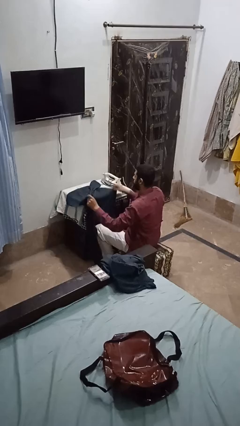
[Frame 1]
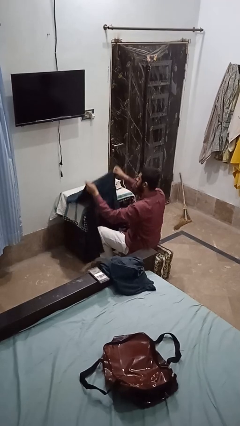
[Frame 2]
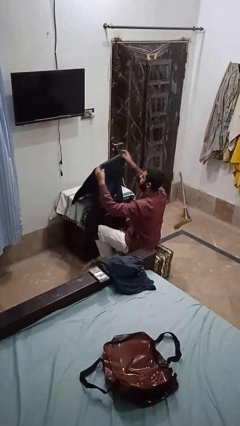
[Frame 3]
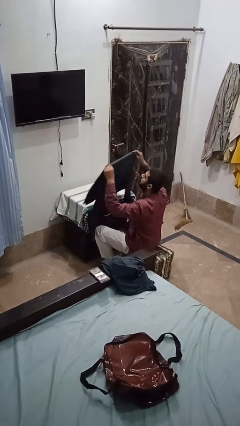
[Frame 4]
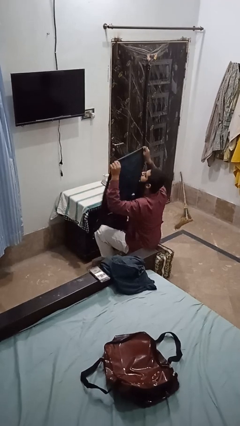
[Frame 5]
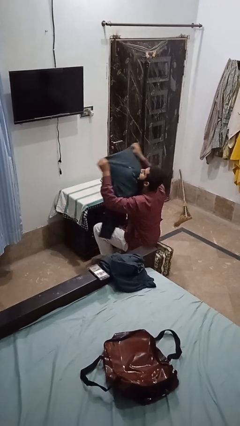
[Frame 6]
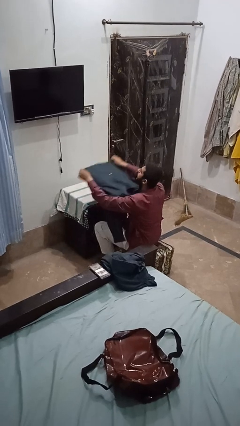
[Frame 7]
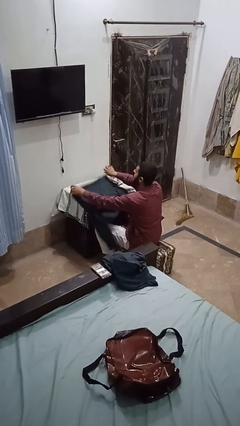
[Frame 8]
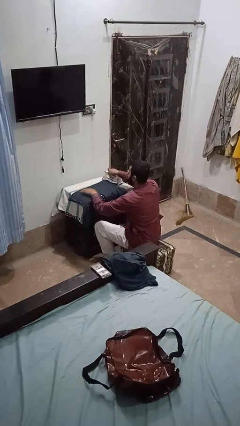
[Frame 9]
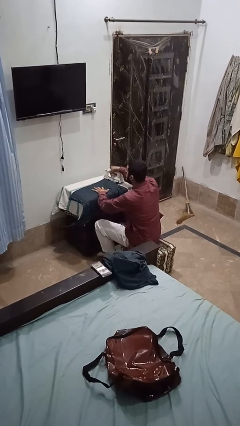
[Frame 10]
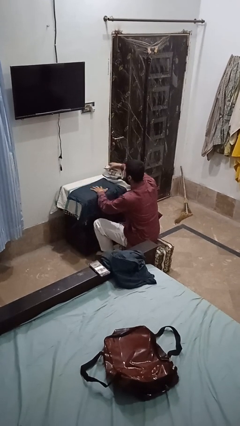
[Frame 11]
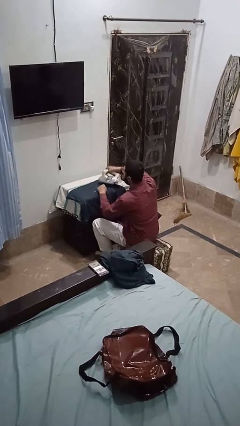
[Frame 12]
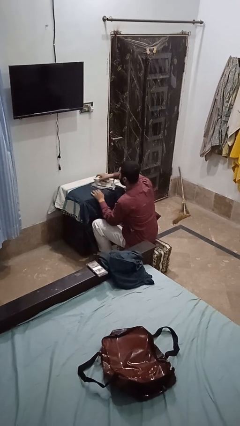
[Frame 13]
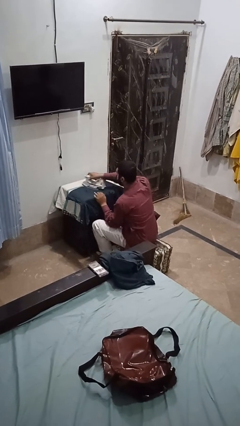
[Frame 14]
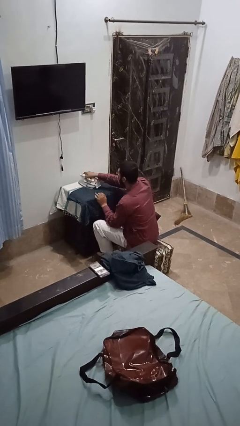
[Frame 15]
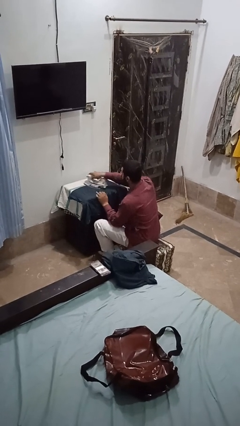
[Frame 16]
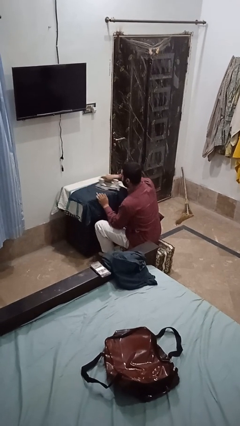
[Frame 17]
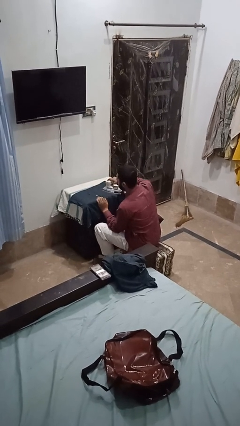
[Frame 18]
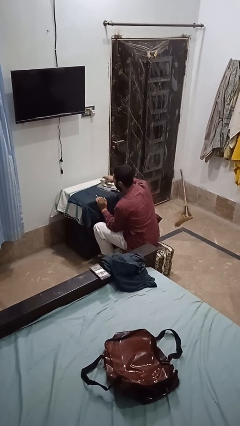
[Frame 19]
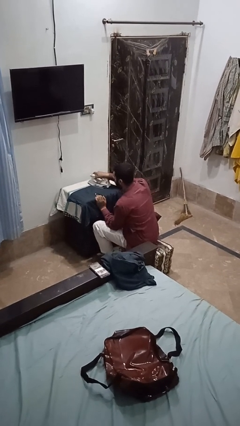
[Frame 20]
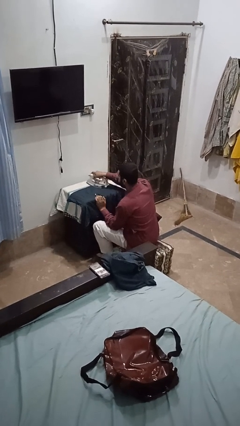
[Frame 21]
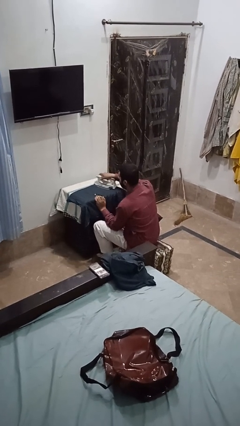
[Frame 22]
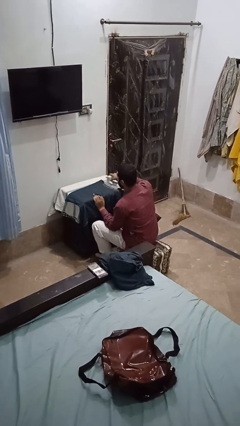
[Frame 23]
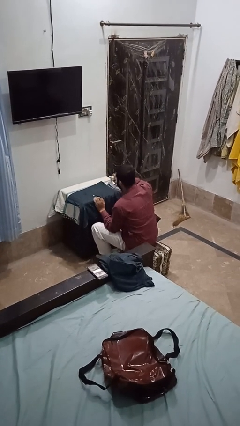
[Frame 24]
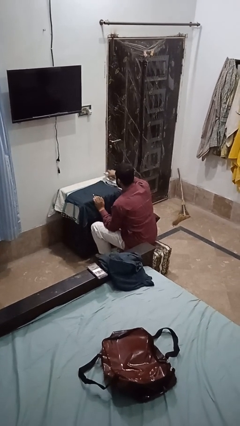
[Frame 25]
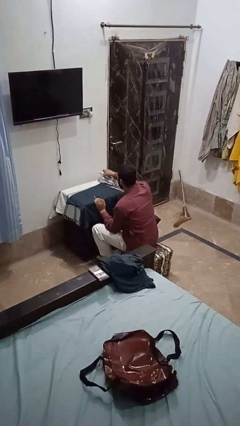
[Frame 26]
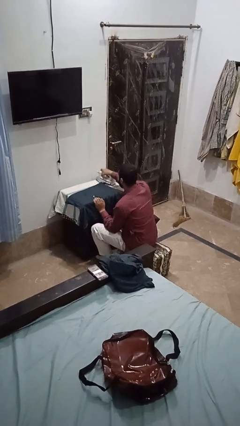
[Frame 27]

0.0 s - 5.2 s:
person irons clothes

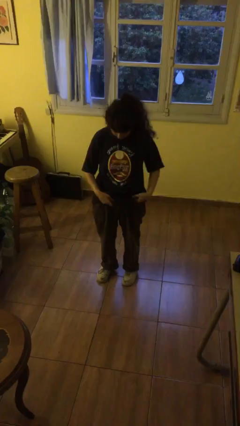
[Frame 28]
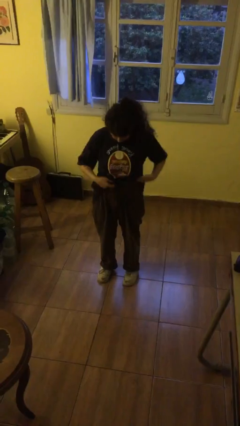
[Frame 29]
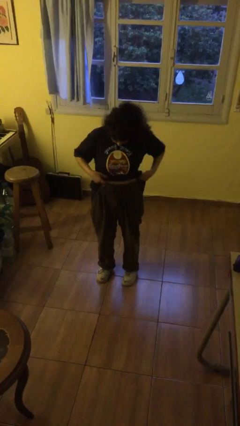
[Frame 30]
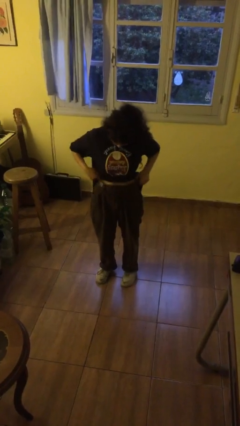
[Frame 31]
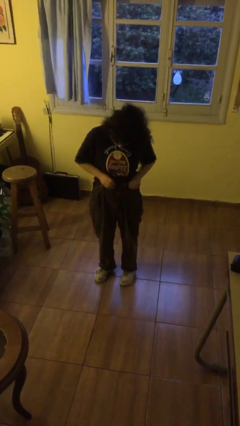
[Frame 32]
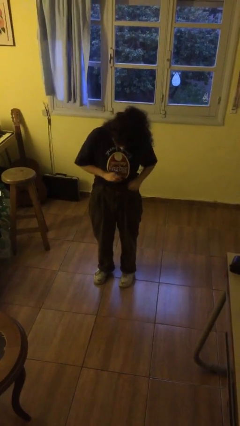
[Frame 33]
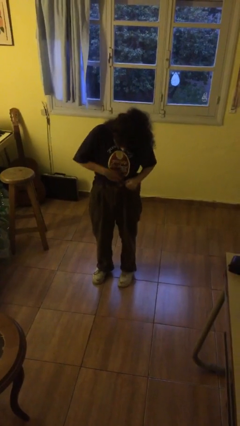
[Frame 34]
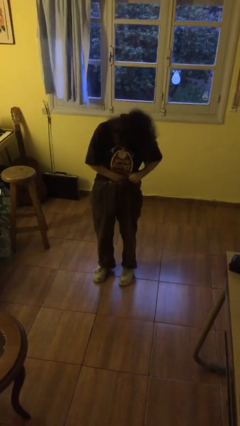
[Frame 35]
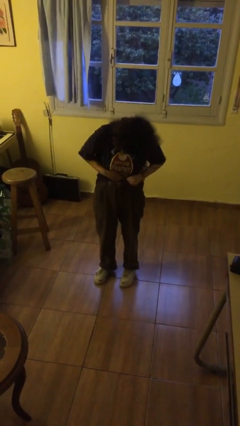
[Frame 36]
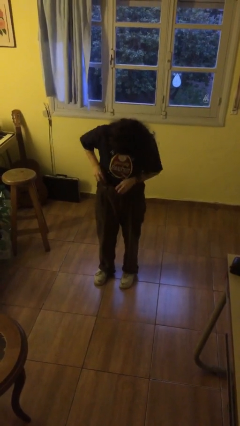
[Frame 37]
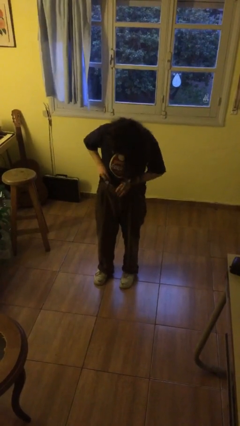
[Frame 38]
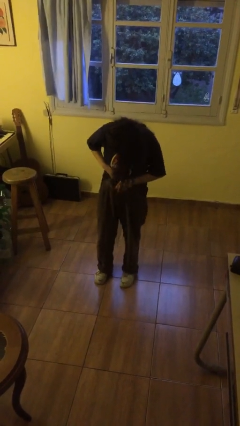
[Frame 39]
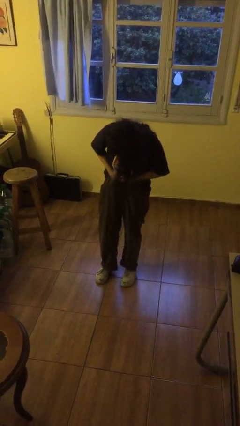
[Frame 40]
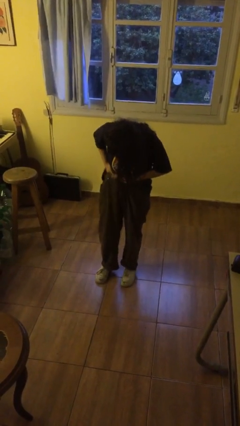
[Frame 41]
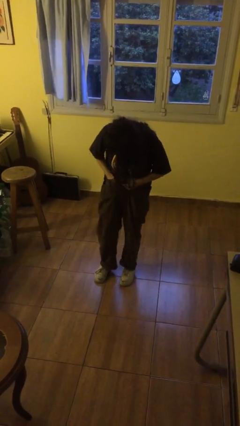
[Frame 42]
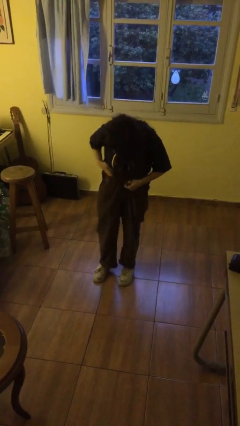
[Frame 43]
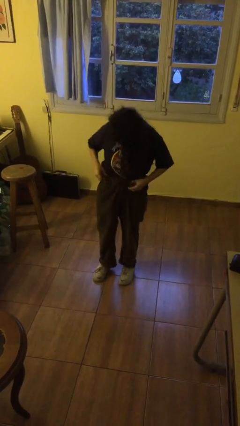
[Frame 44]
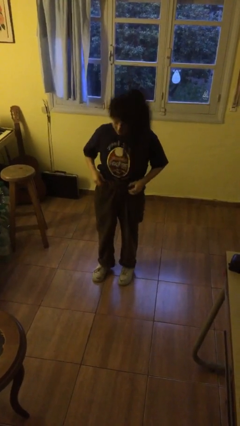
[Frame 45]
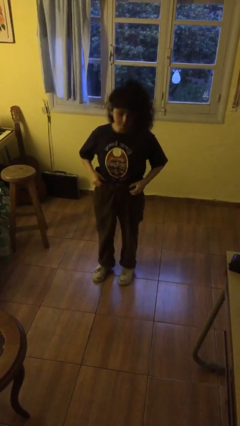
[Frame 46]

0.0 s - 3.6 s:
person tucks in shirt

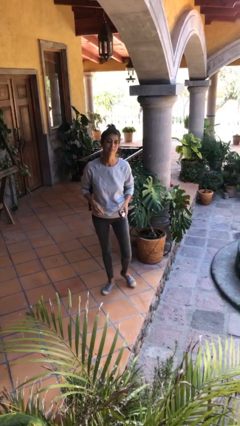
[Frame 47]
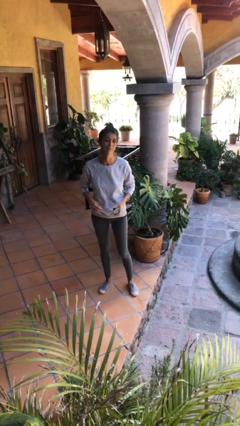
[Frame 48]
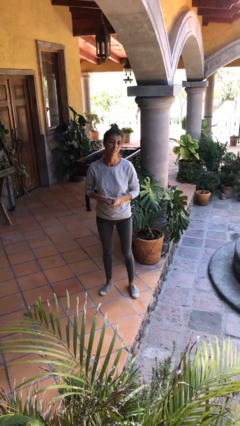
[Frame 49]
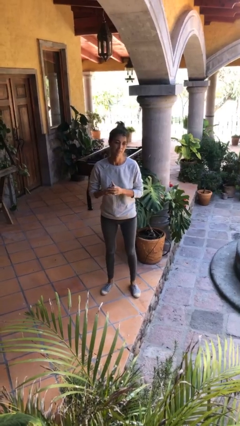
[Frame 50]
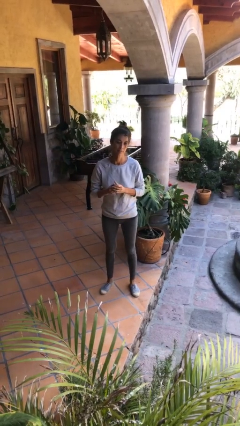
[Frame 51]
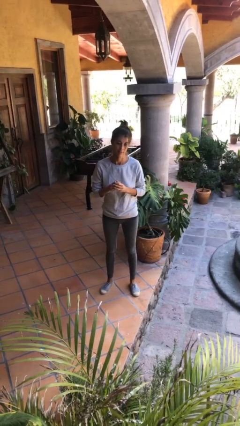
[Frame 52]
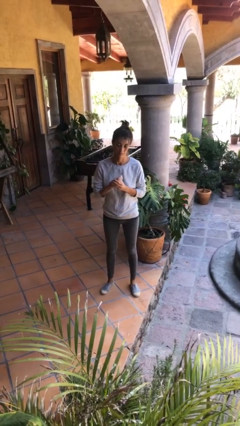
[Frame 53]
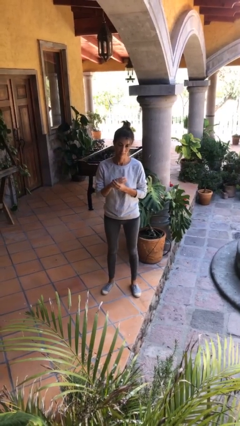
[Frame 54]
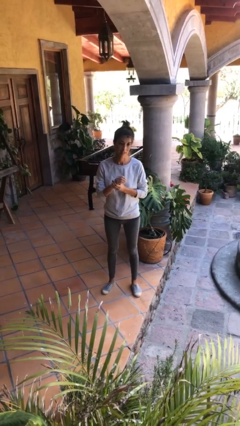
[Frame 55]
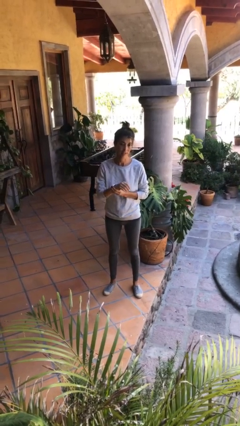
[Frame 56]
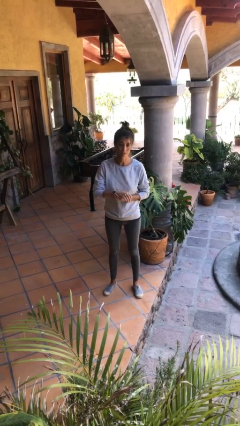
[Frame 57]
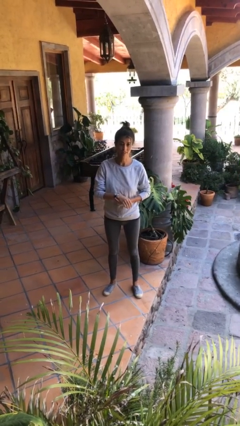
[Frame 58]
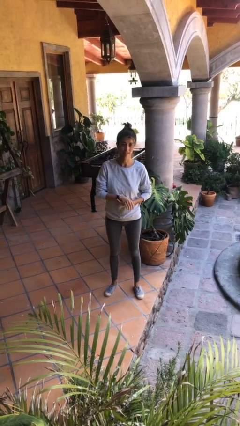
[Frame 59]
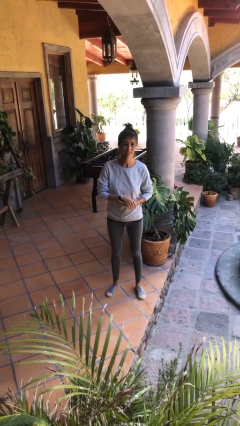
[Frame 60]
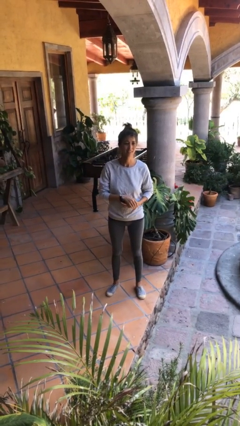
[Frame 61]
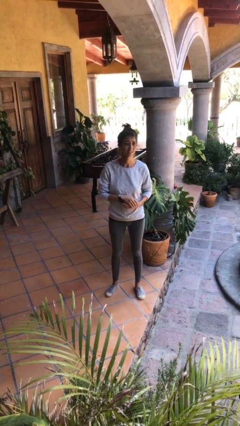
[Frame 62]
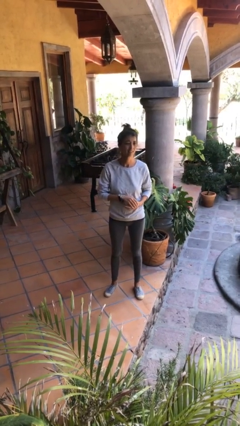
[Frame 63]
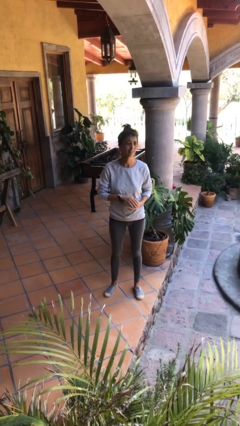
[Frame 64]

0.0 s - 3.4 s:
person puts on wristwatch

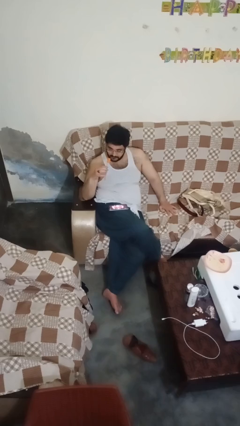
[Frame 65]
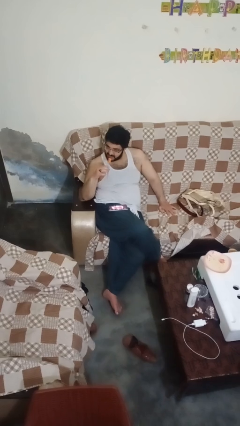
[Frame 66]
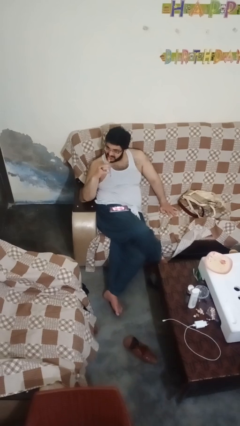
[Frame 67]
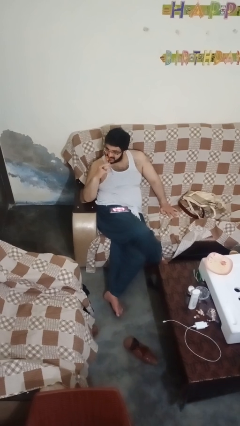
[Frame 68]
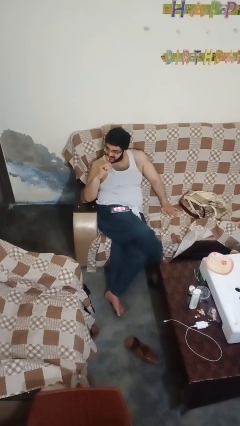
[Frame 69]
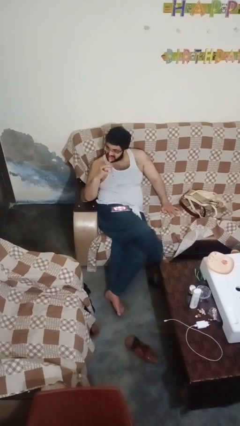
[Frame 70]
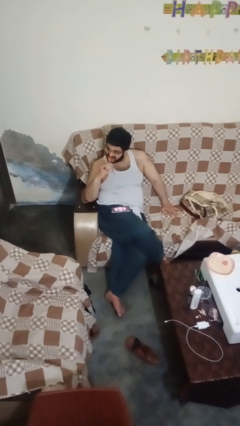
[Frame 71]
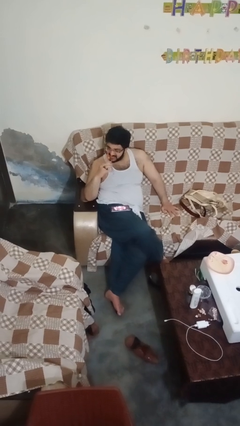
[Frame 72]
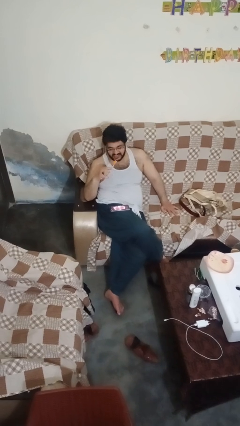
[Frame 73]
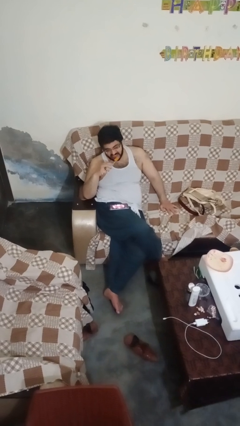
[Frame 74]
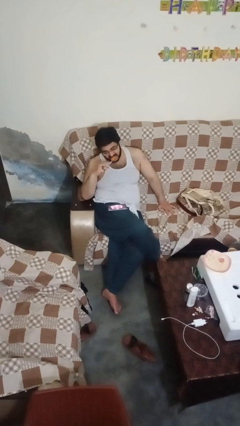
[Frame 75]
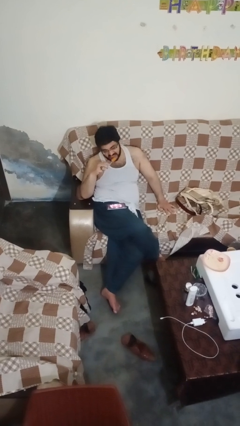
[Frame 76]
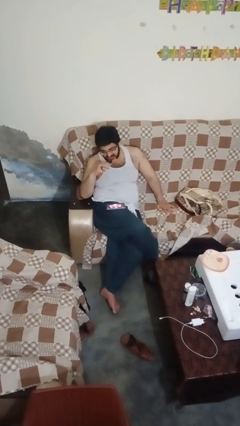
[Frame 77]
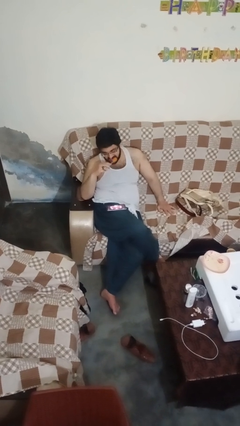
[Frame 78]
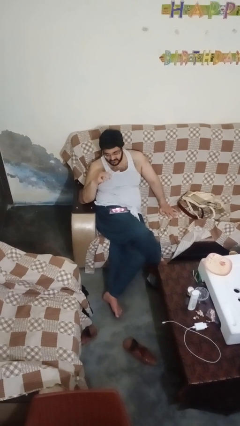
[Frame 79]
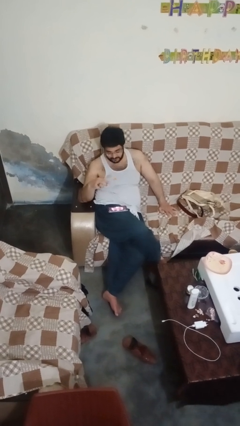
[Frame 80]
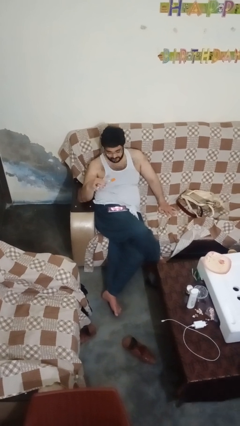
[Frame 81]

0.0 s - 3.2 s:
person brushes teeth

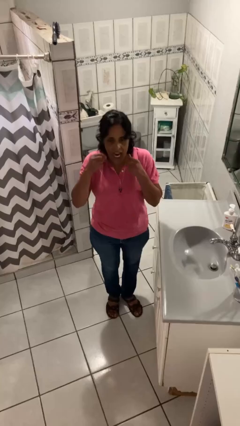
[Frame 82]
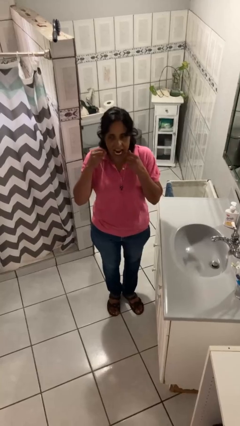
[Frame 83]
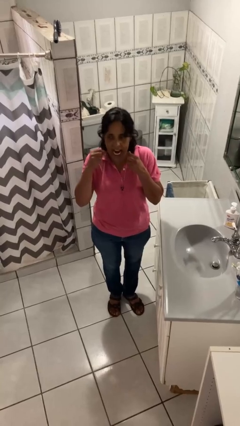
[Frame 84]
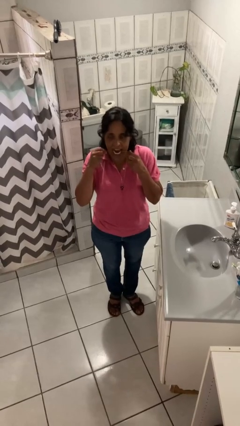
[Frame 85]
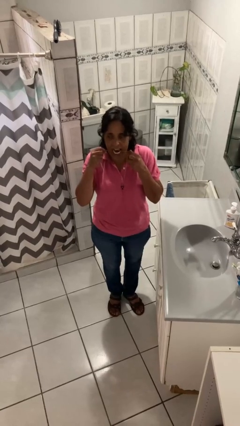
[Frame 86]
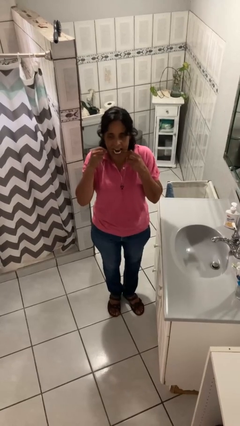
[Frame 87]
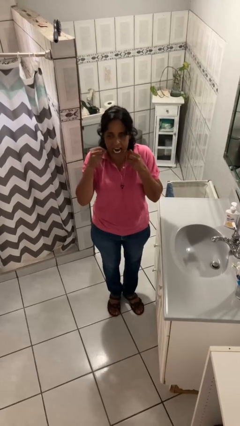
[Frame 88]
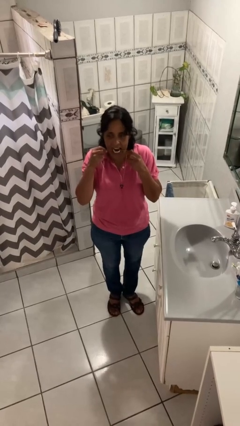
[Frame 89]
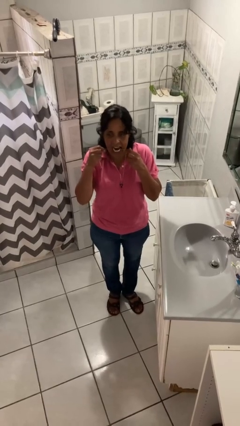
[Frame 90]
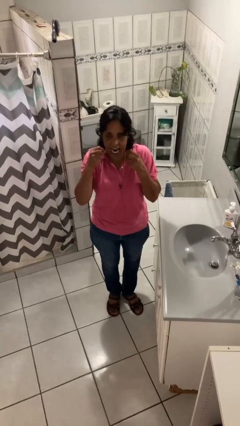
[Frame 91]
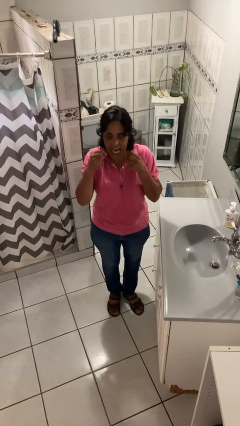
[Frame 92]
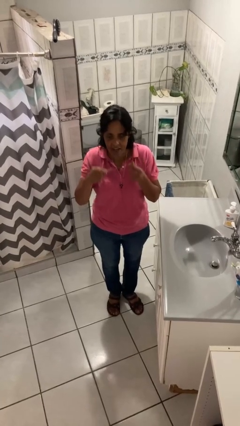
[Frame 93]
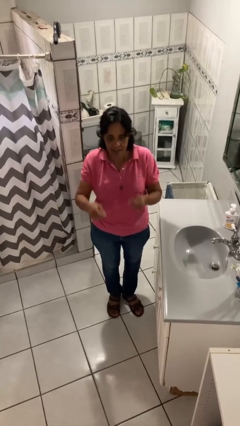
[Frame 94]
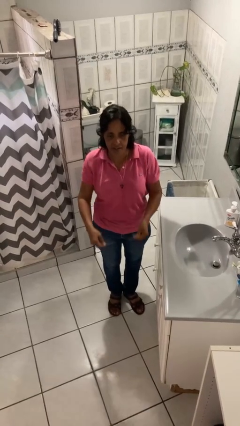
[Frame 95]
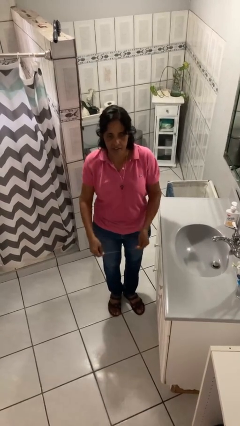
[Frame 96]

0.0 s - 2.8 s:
person flosses
